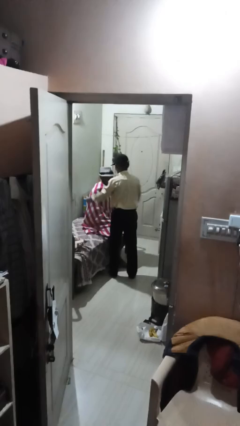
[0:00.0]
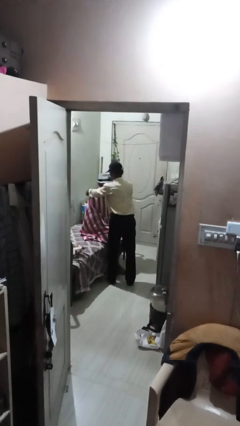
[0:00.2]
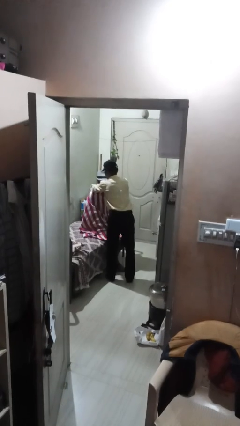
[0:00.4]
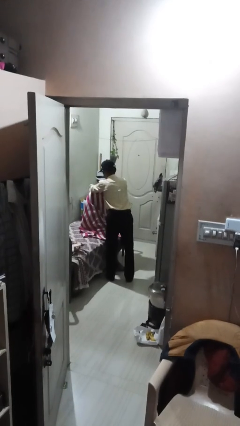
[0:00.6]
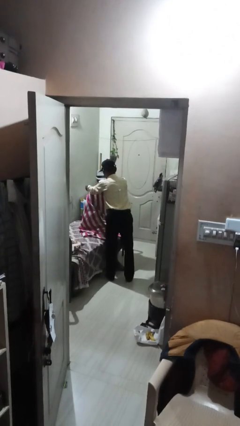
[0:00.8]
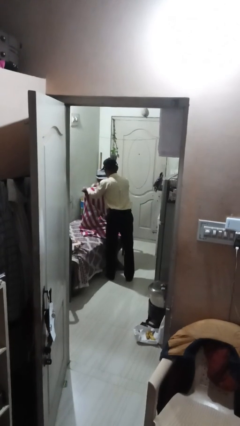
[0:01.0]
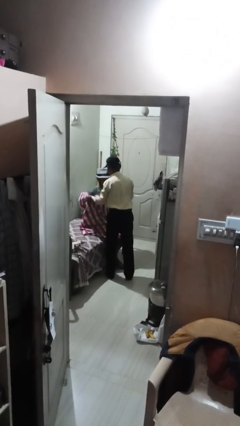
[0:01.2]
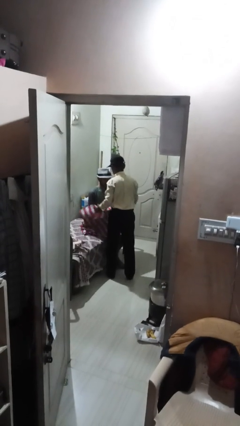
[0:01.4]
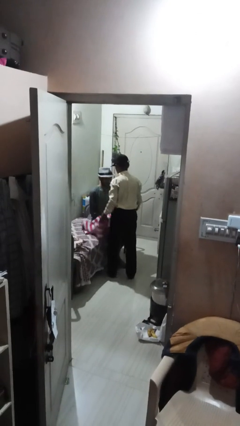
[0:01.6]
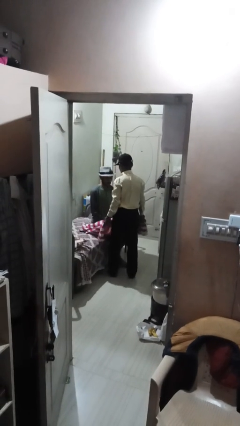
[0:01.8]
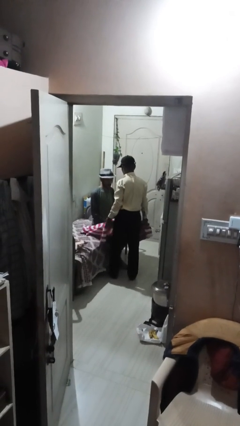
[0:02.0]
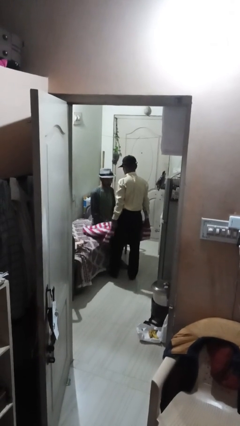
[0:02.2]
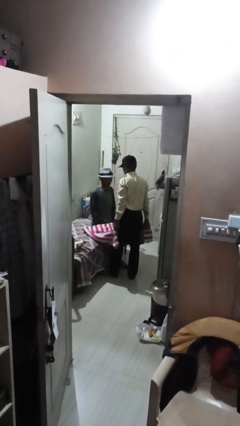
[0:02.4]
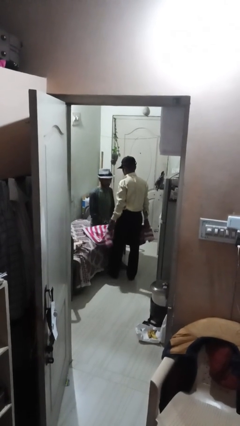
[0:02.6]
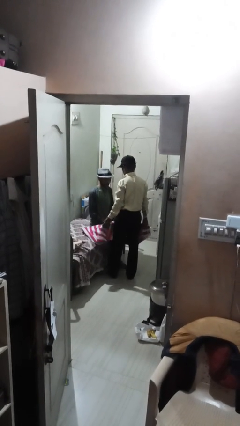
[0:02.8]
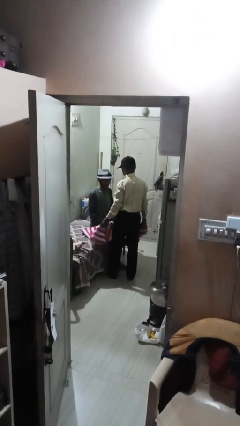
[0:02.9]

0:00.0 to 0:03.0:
person uncovers friend with blanket

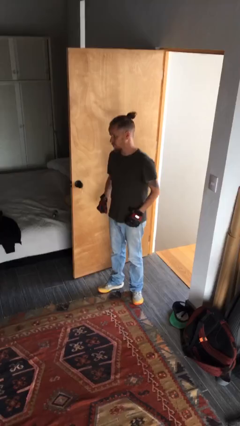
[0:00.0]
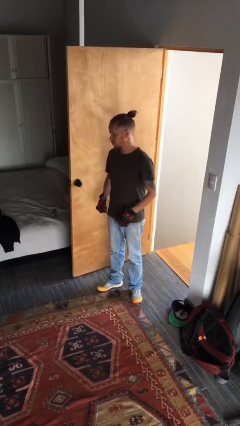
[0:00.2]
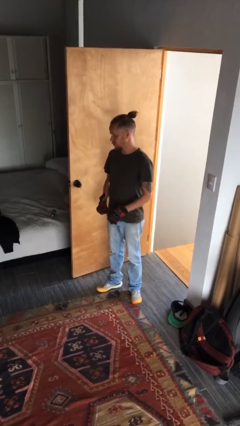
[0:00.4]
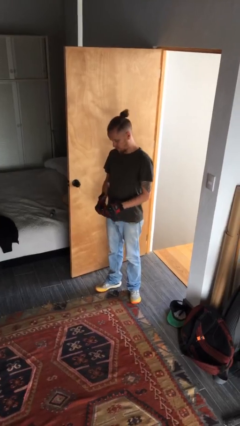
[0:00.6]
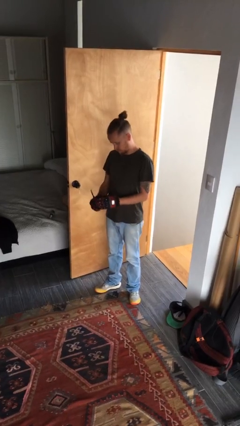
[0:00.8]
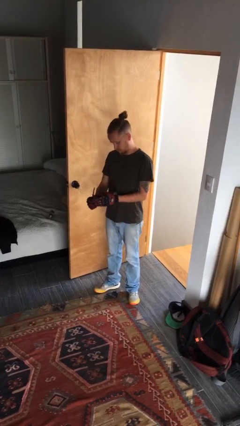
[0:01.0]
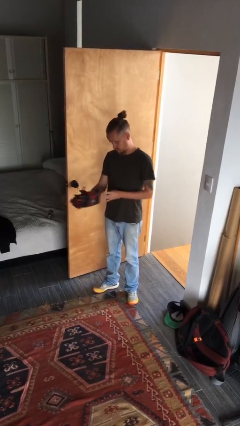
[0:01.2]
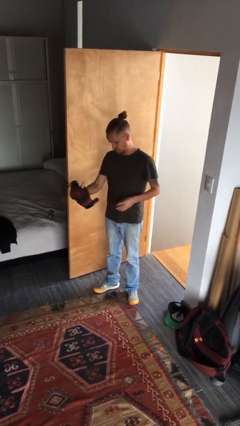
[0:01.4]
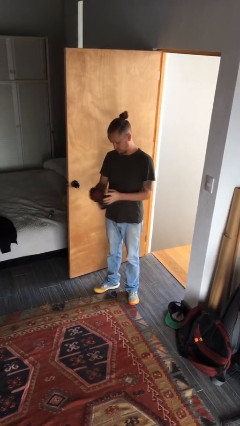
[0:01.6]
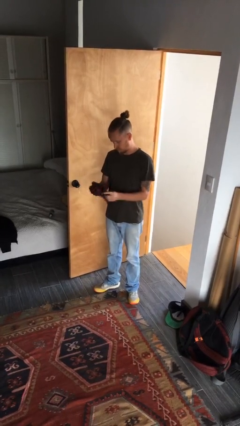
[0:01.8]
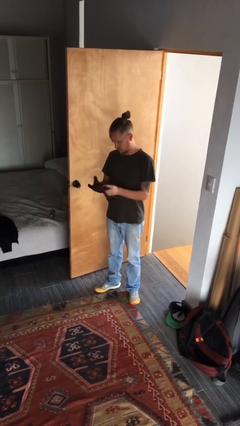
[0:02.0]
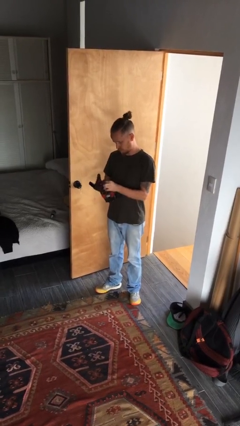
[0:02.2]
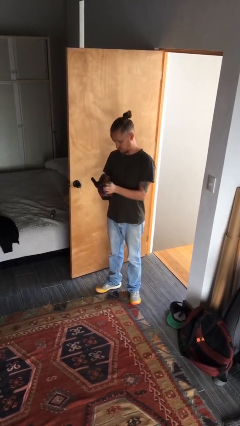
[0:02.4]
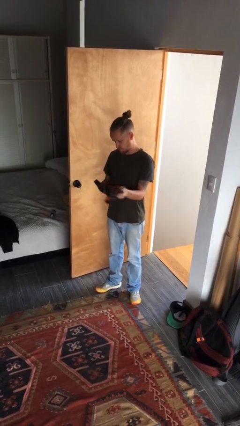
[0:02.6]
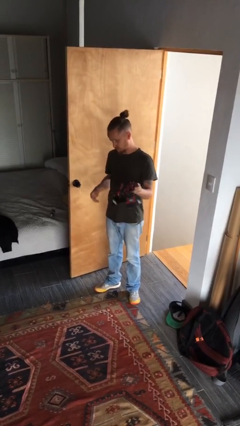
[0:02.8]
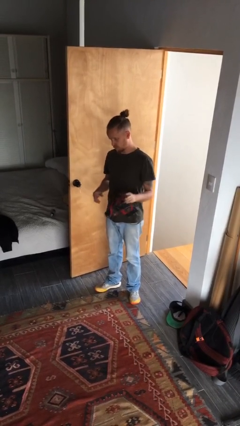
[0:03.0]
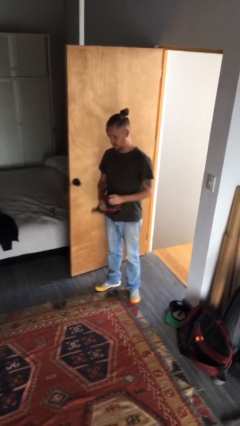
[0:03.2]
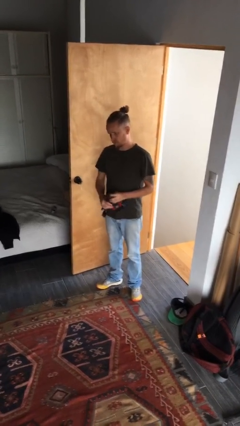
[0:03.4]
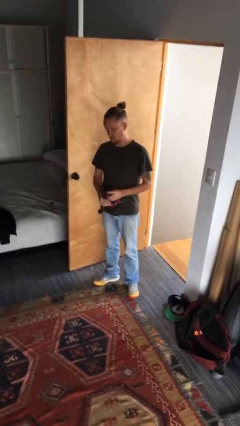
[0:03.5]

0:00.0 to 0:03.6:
person takes off gloves

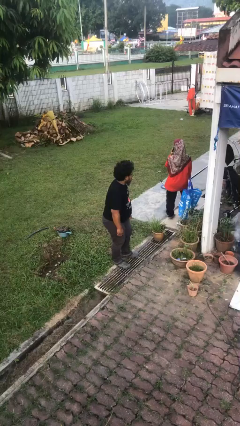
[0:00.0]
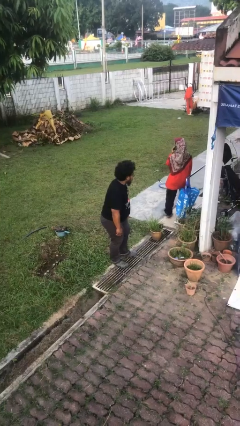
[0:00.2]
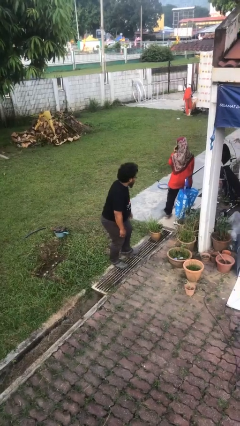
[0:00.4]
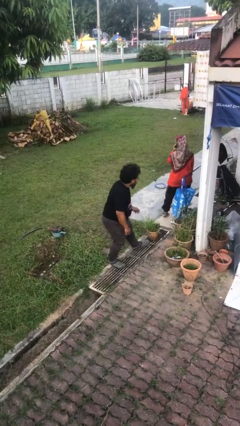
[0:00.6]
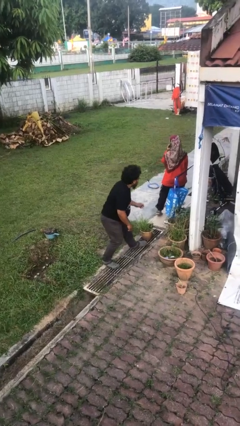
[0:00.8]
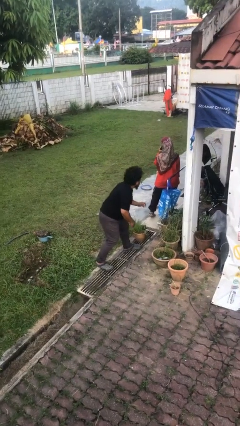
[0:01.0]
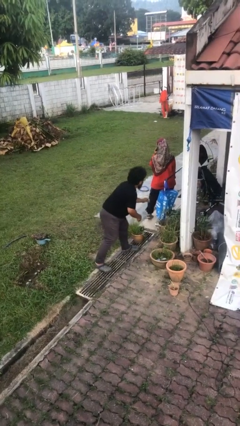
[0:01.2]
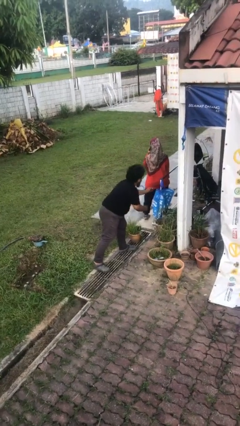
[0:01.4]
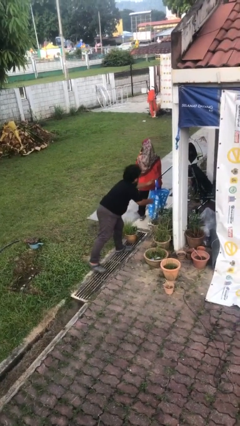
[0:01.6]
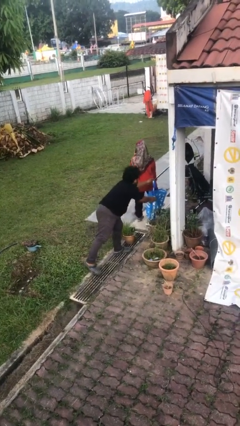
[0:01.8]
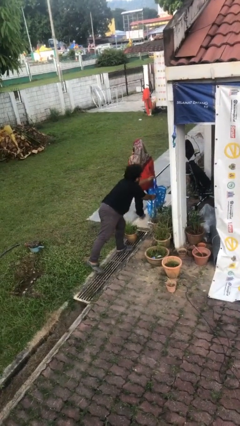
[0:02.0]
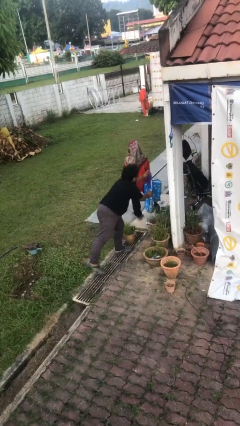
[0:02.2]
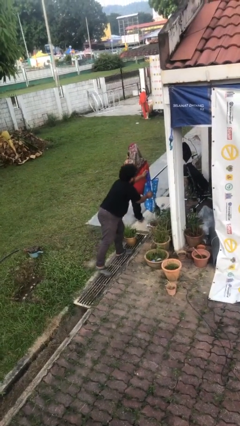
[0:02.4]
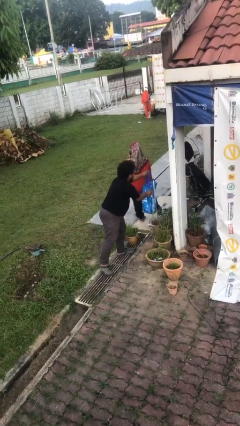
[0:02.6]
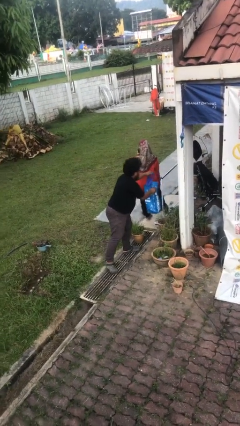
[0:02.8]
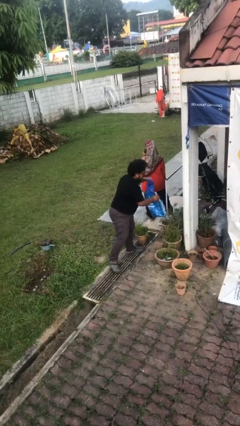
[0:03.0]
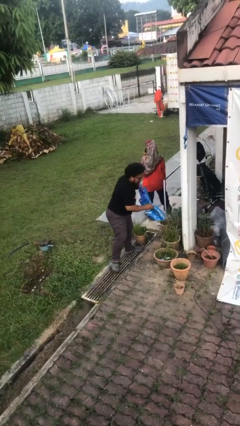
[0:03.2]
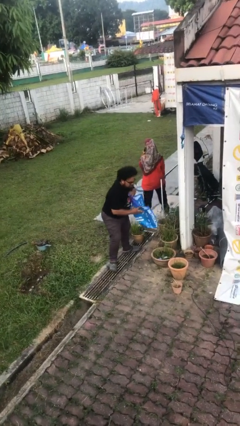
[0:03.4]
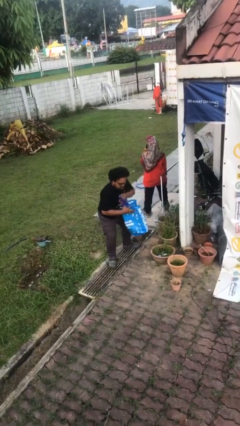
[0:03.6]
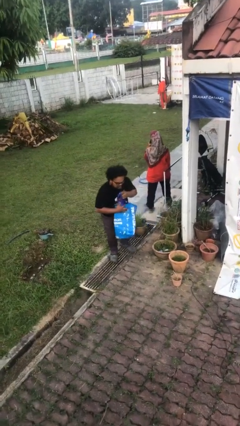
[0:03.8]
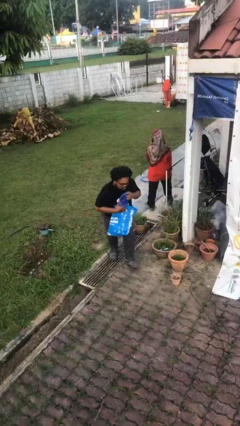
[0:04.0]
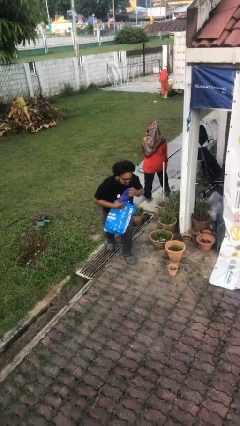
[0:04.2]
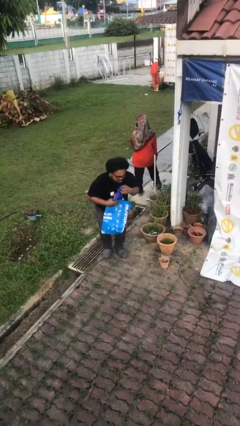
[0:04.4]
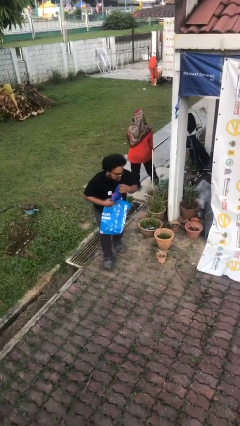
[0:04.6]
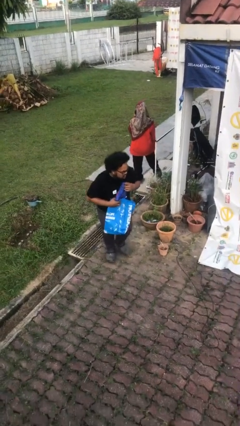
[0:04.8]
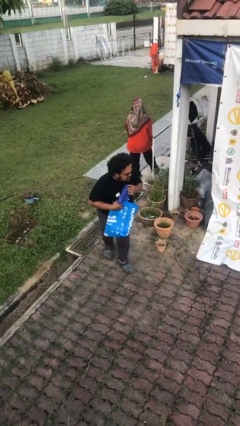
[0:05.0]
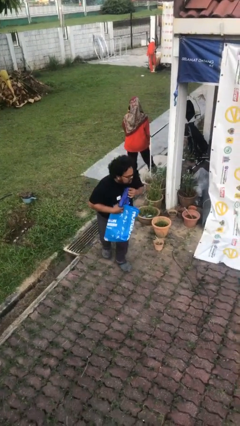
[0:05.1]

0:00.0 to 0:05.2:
person steals object from person

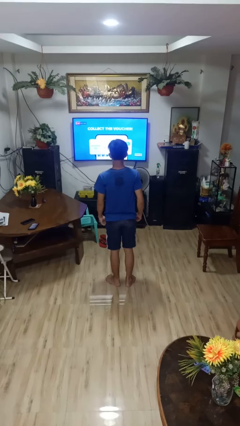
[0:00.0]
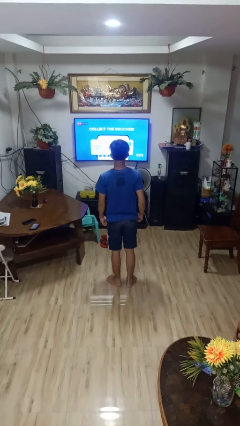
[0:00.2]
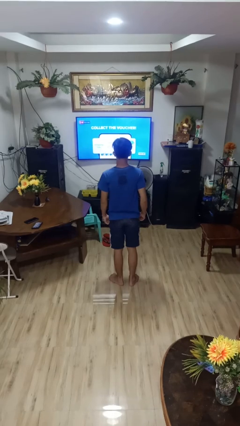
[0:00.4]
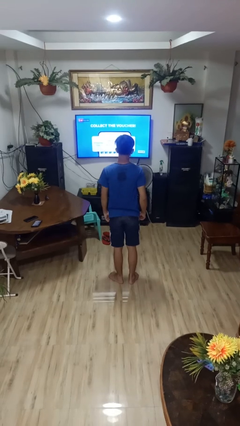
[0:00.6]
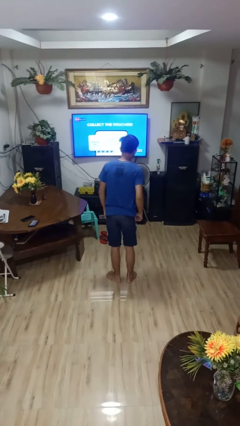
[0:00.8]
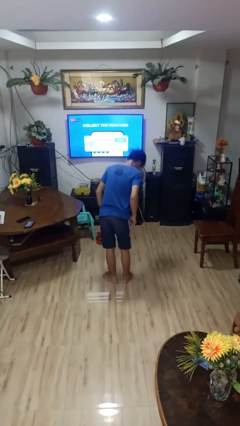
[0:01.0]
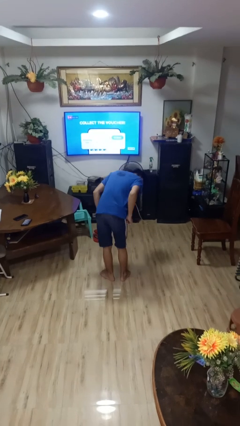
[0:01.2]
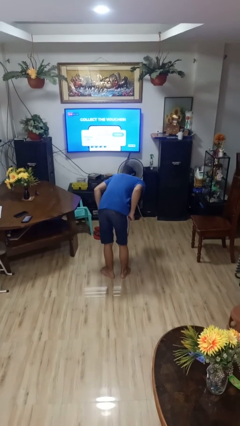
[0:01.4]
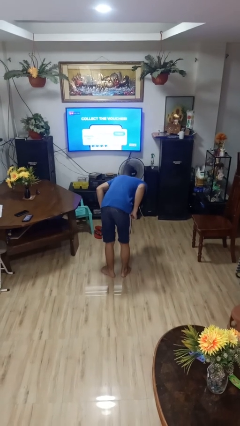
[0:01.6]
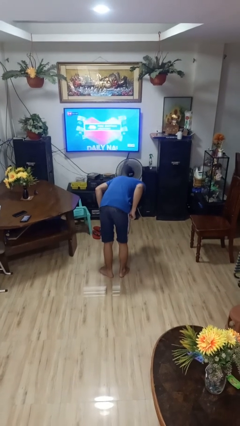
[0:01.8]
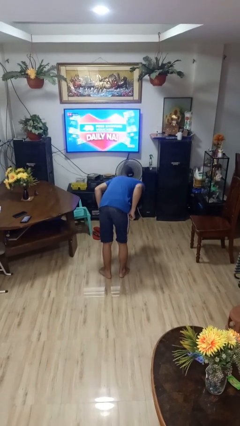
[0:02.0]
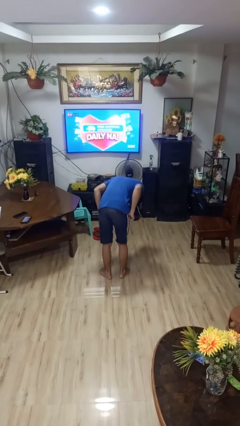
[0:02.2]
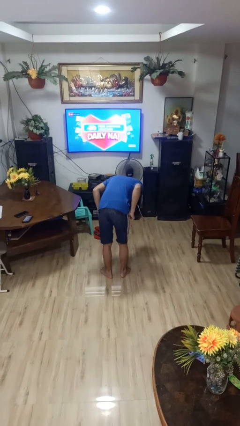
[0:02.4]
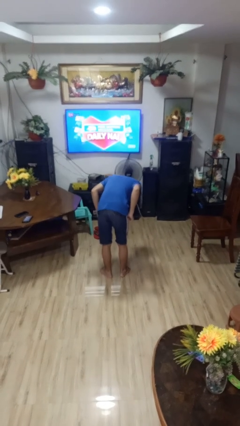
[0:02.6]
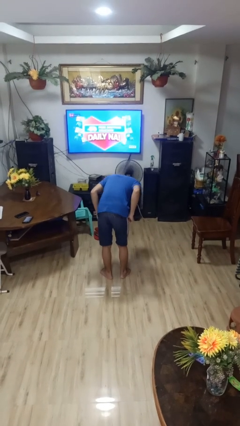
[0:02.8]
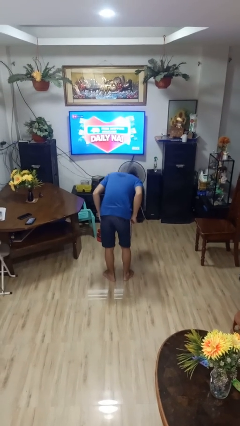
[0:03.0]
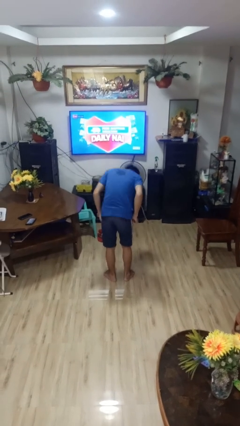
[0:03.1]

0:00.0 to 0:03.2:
person bows

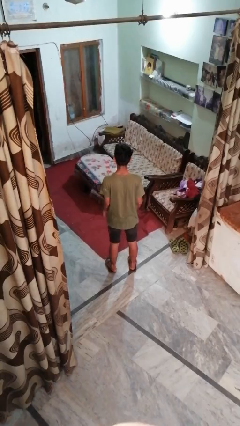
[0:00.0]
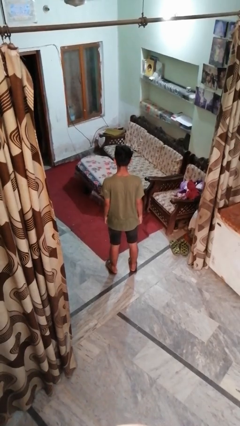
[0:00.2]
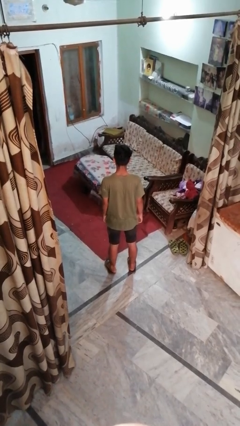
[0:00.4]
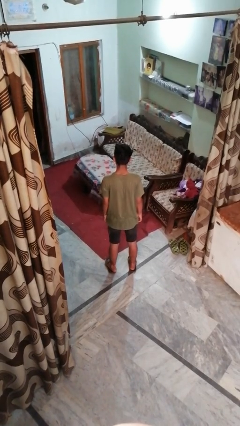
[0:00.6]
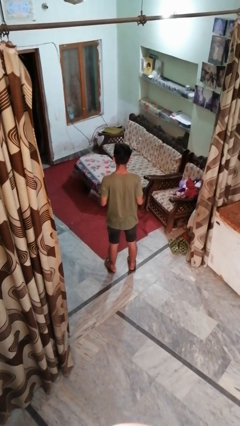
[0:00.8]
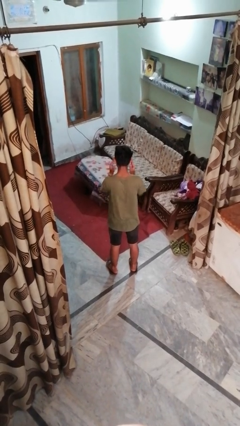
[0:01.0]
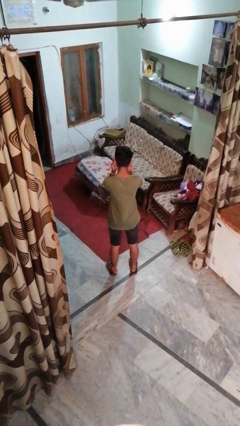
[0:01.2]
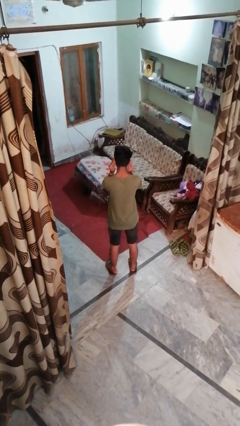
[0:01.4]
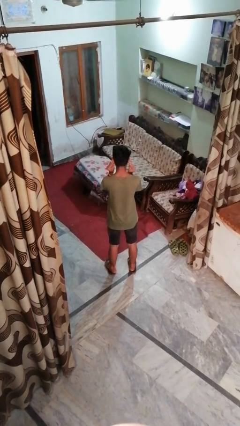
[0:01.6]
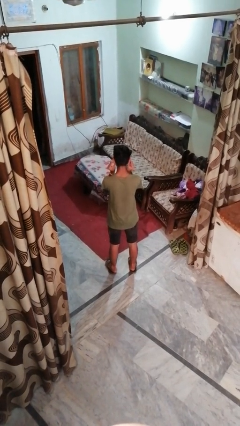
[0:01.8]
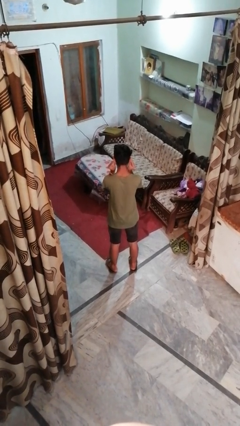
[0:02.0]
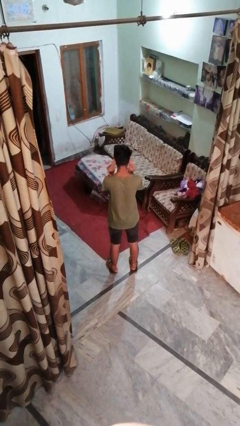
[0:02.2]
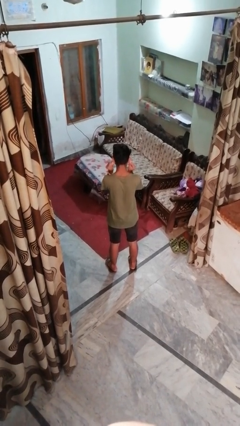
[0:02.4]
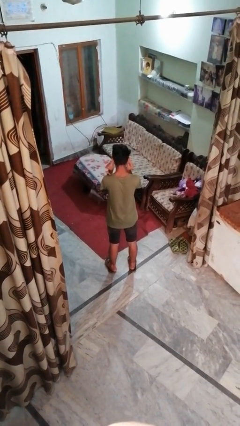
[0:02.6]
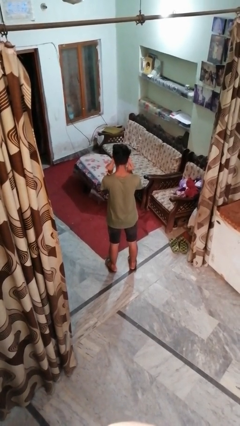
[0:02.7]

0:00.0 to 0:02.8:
person touches earlobe
